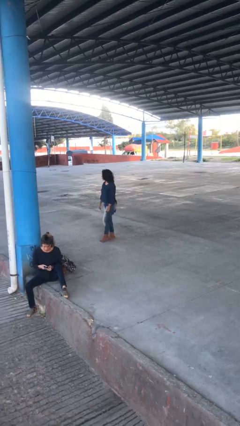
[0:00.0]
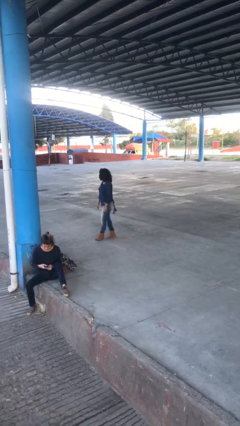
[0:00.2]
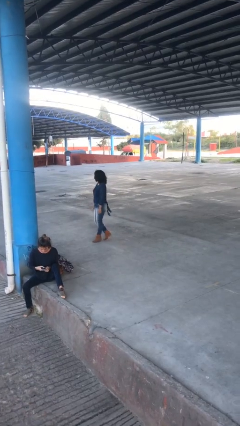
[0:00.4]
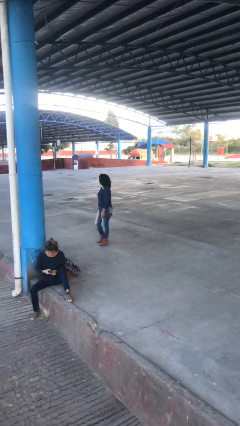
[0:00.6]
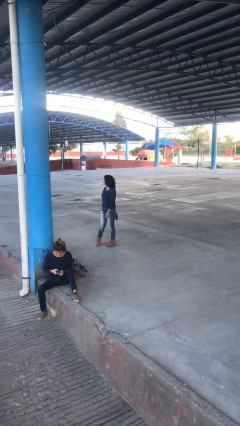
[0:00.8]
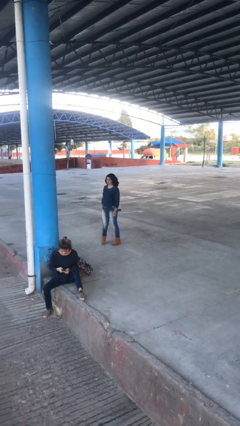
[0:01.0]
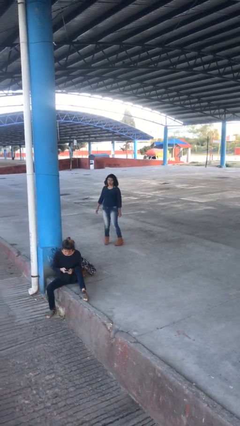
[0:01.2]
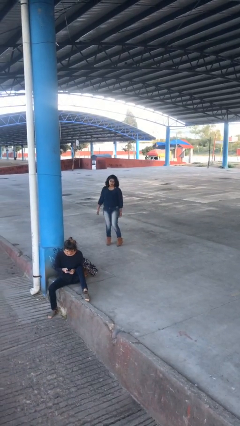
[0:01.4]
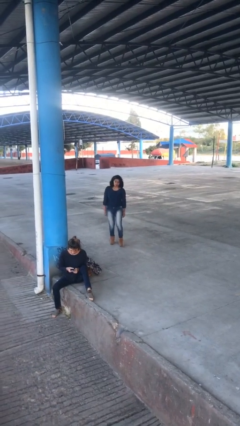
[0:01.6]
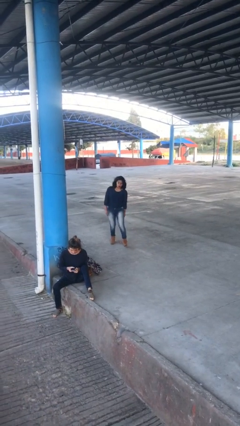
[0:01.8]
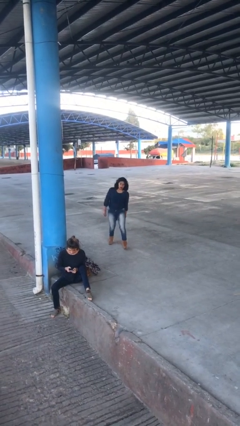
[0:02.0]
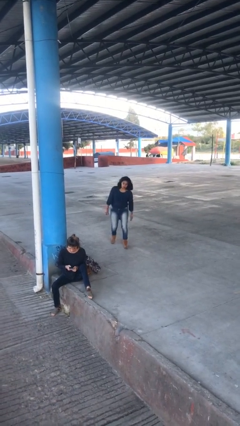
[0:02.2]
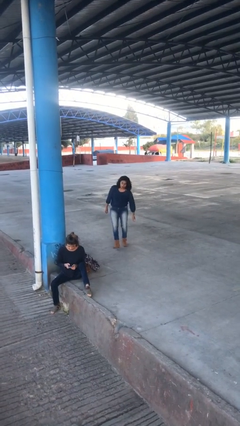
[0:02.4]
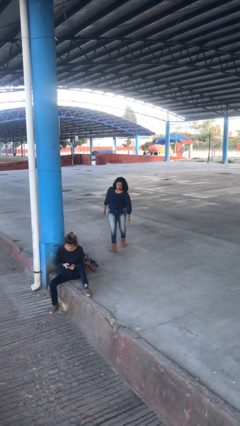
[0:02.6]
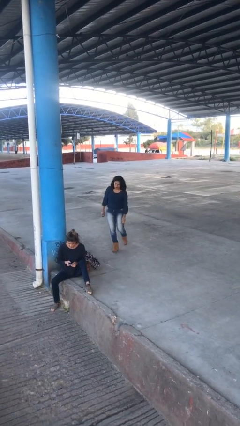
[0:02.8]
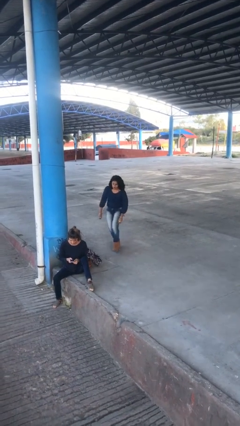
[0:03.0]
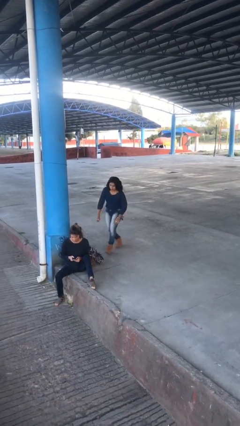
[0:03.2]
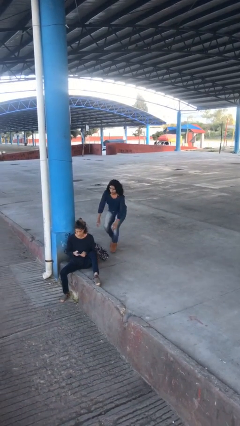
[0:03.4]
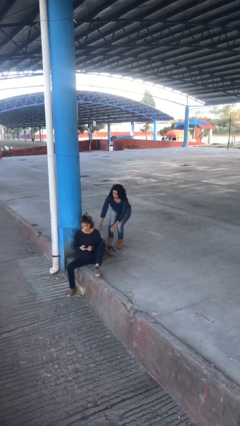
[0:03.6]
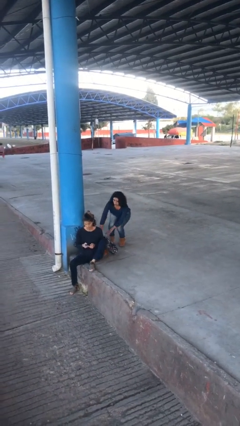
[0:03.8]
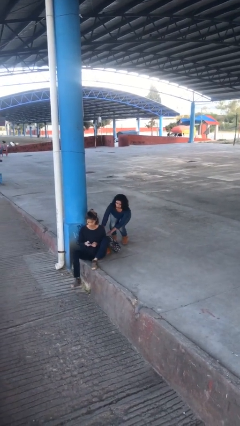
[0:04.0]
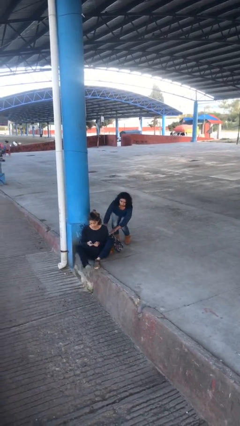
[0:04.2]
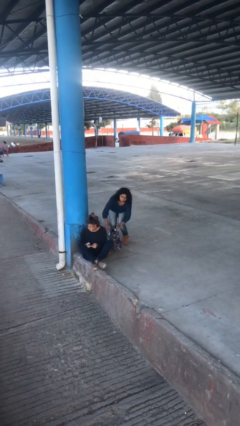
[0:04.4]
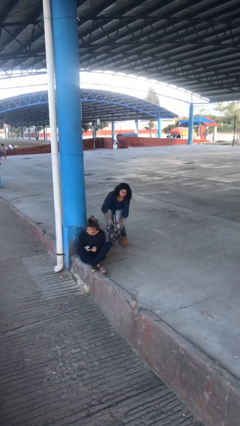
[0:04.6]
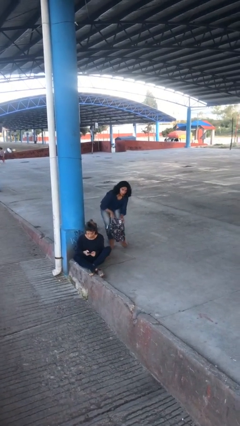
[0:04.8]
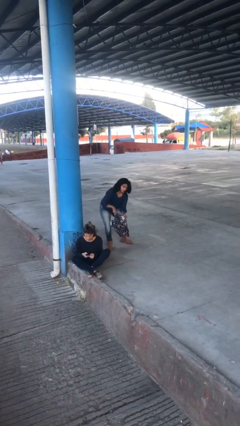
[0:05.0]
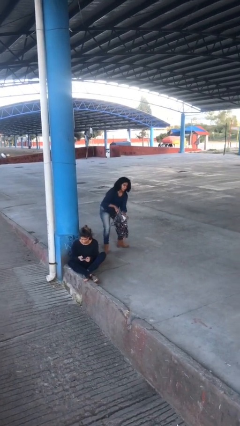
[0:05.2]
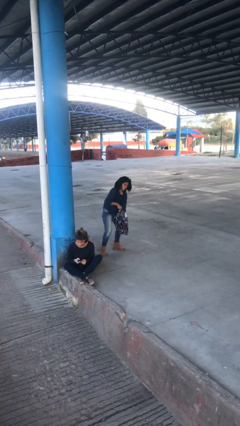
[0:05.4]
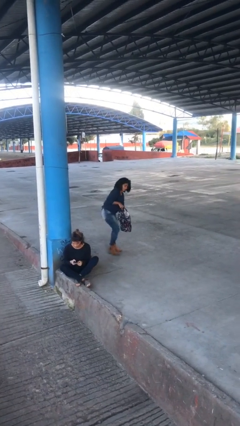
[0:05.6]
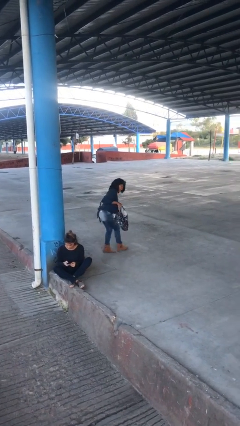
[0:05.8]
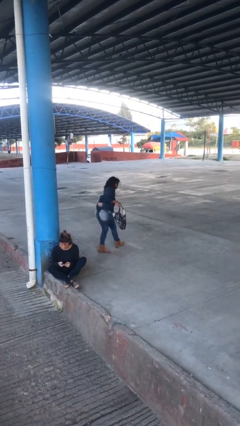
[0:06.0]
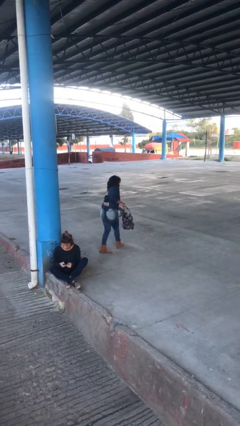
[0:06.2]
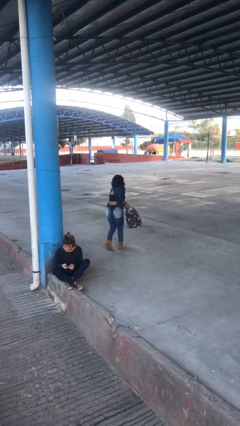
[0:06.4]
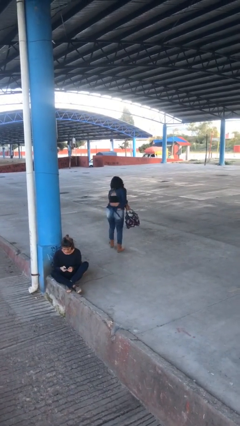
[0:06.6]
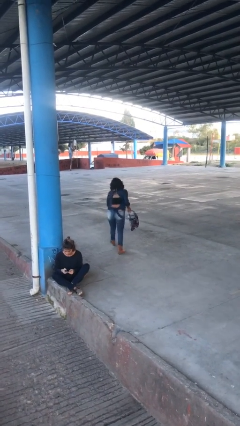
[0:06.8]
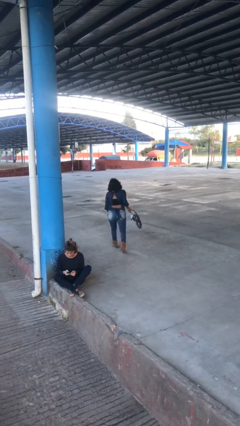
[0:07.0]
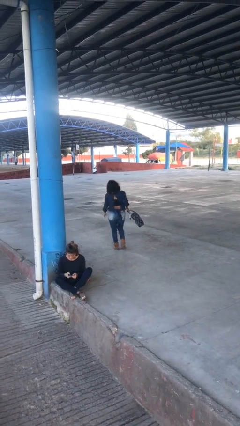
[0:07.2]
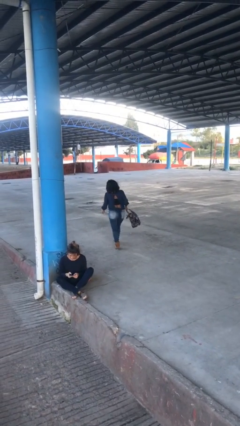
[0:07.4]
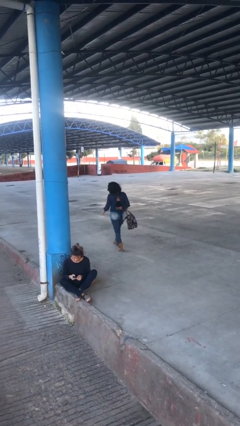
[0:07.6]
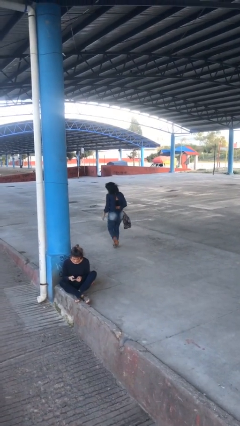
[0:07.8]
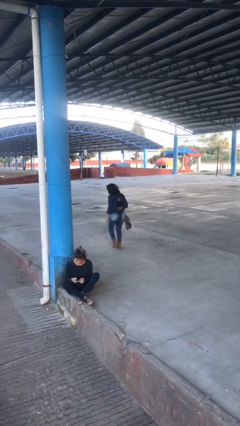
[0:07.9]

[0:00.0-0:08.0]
person steals object from person

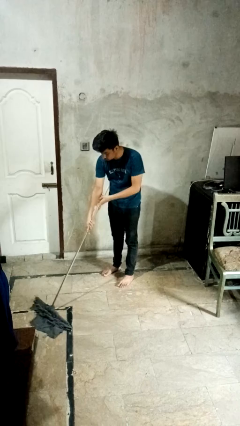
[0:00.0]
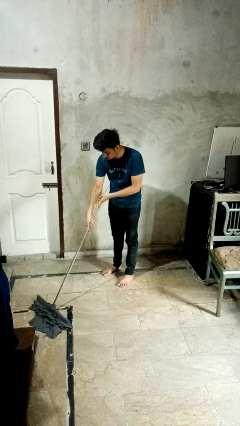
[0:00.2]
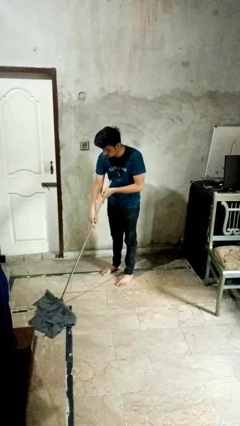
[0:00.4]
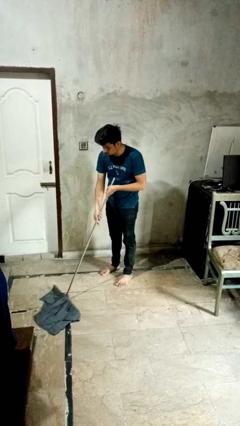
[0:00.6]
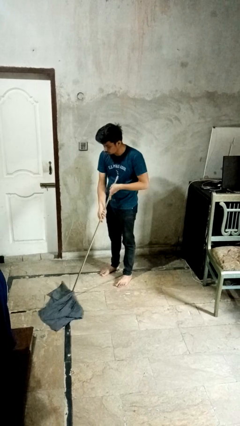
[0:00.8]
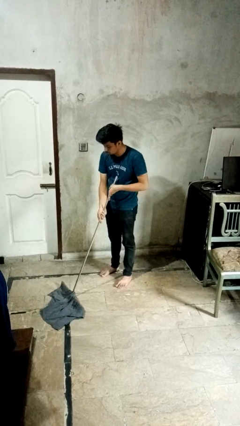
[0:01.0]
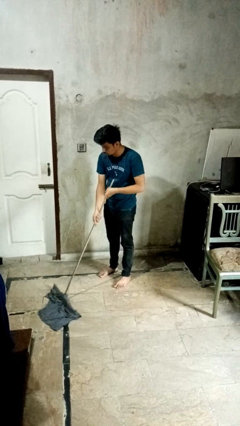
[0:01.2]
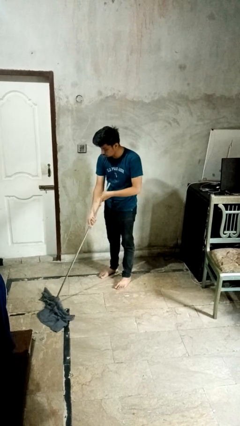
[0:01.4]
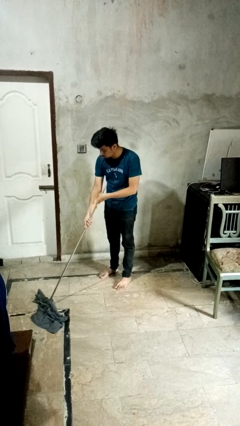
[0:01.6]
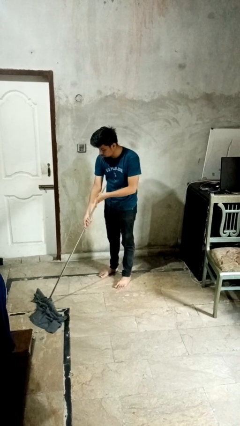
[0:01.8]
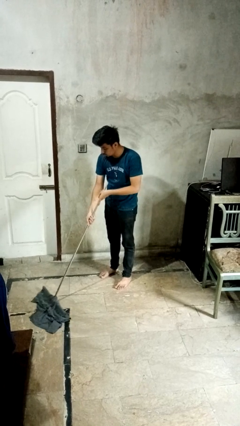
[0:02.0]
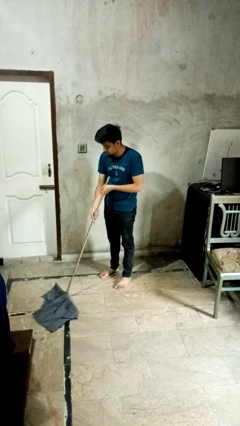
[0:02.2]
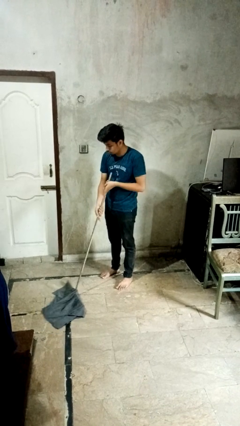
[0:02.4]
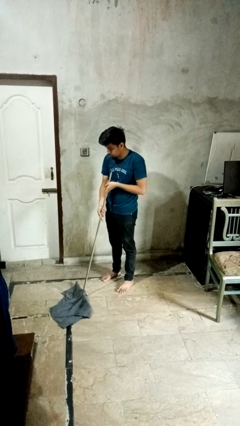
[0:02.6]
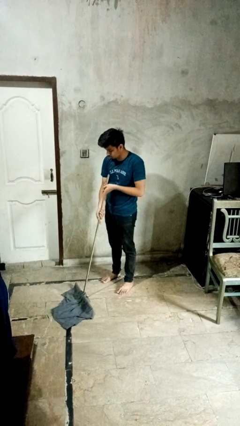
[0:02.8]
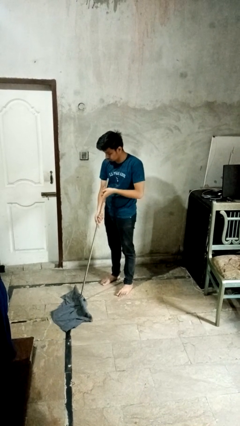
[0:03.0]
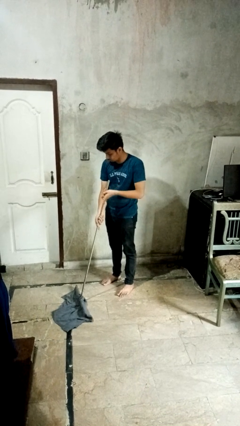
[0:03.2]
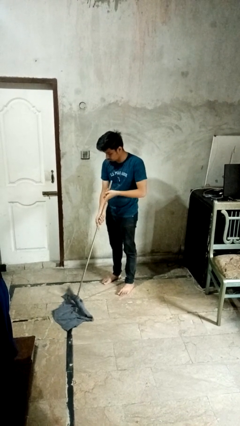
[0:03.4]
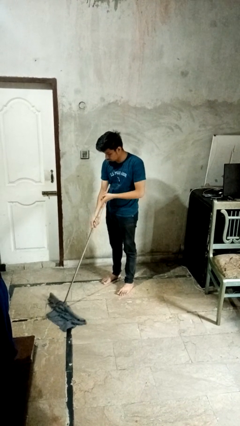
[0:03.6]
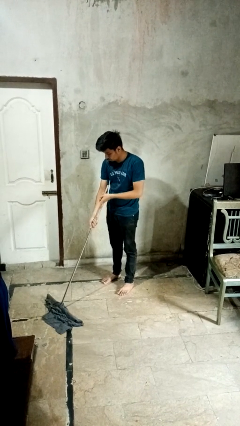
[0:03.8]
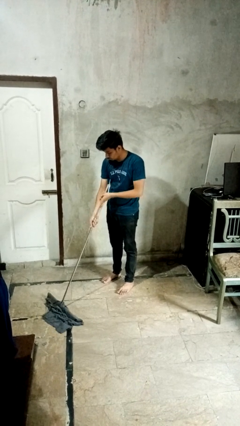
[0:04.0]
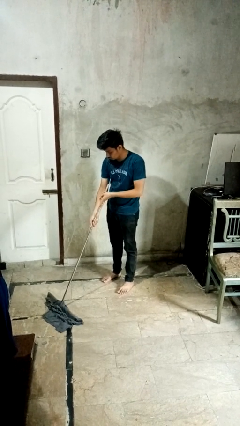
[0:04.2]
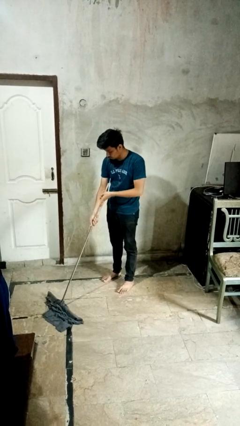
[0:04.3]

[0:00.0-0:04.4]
person mops

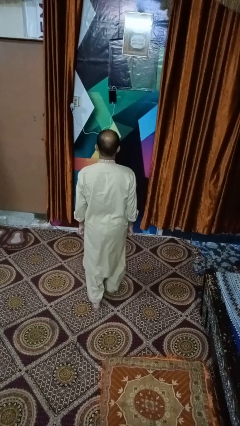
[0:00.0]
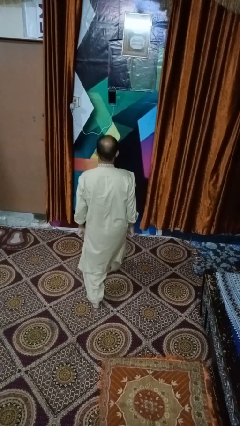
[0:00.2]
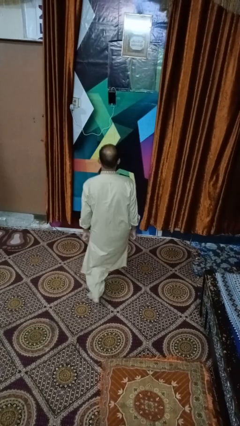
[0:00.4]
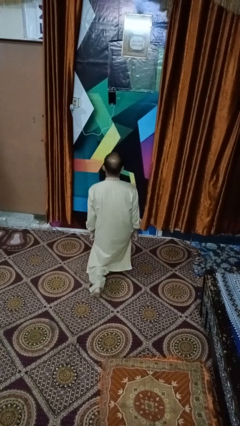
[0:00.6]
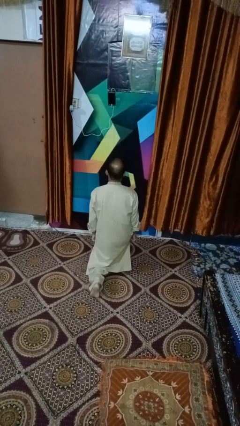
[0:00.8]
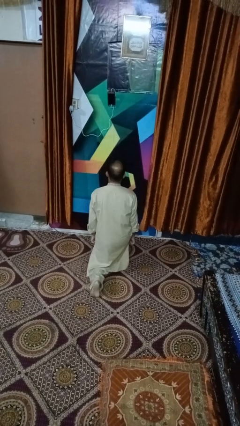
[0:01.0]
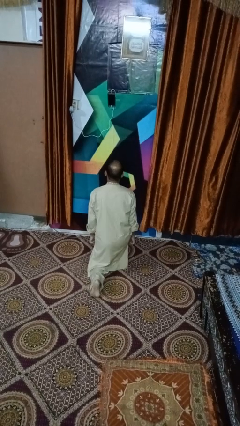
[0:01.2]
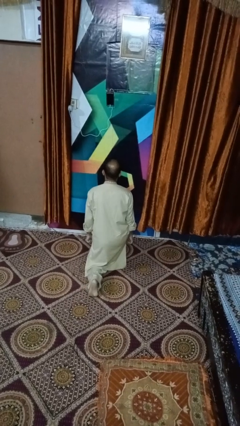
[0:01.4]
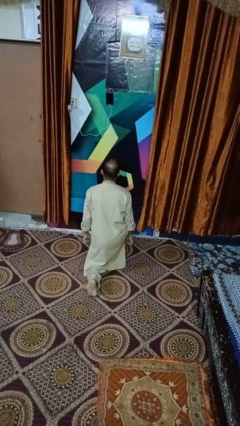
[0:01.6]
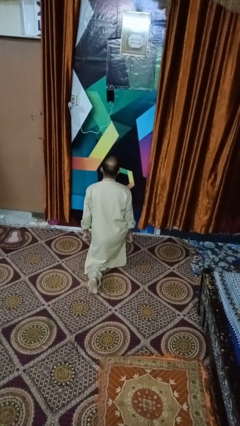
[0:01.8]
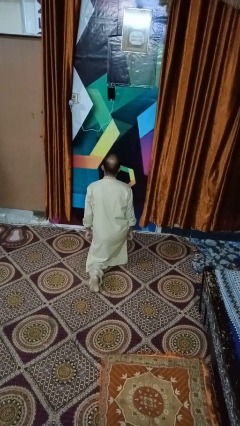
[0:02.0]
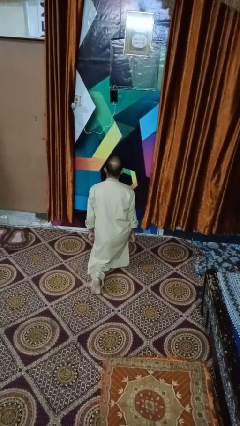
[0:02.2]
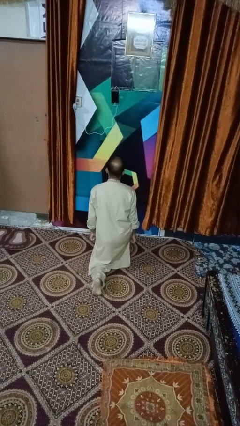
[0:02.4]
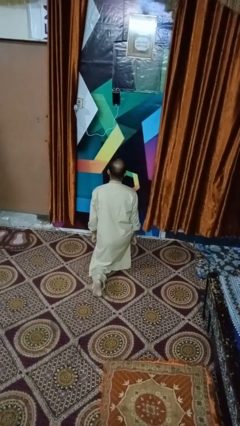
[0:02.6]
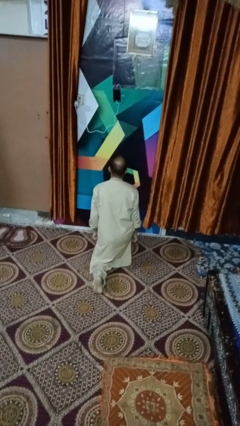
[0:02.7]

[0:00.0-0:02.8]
person exercises with lunges

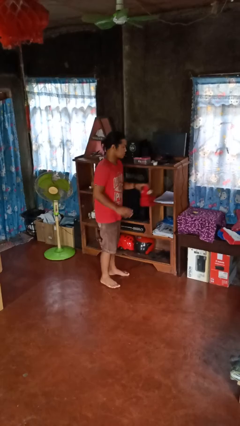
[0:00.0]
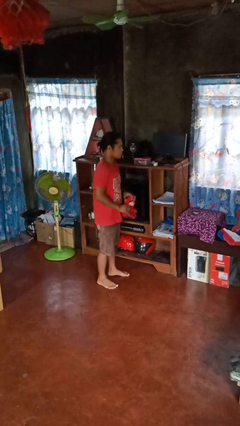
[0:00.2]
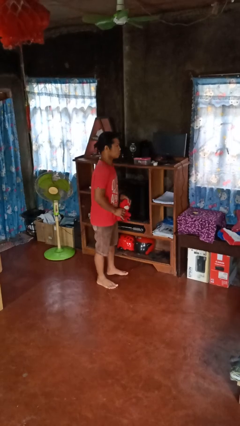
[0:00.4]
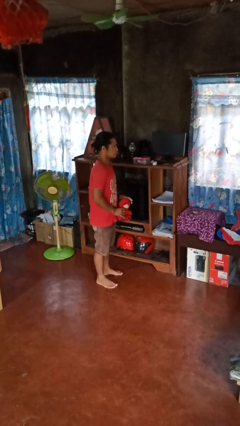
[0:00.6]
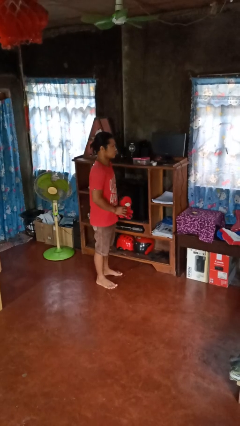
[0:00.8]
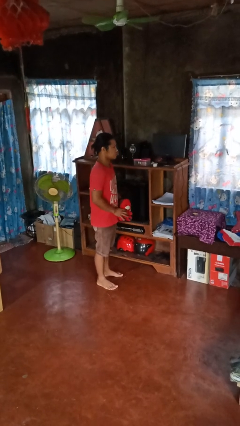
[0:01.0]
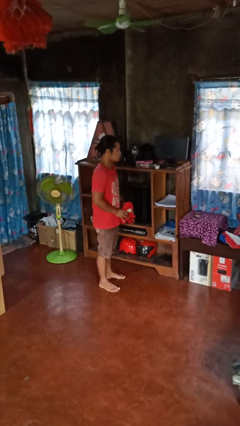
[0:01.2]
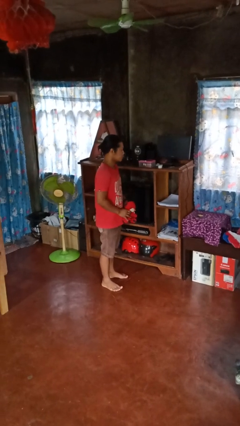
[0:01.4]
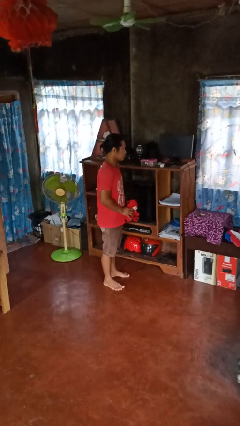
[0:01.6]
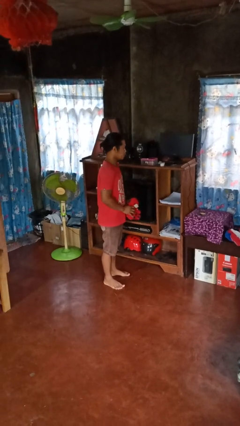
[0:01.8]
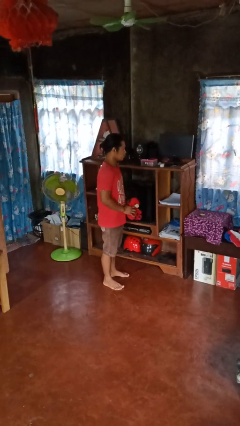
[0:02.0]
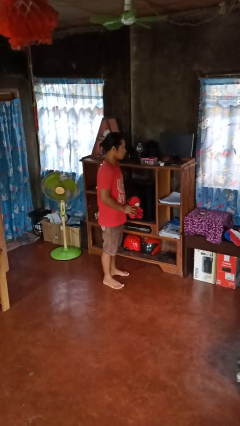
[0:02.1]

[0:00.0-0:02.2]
person picks up object from shelf

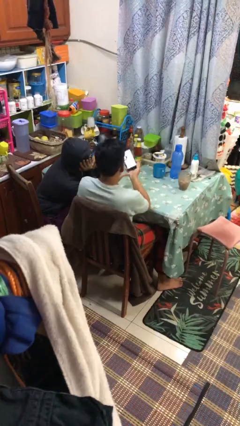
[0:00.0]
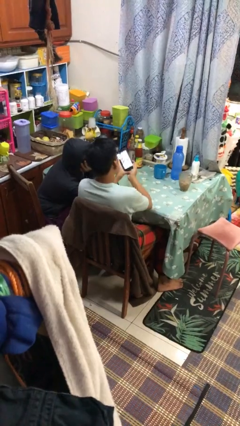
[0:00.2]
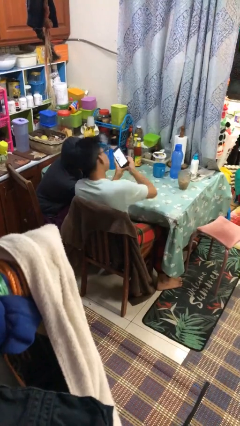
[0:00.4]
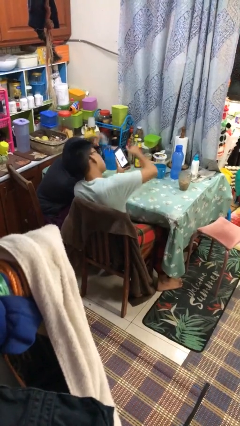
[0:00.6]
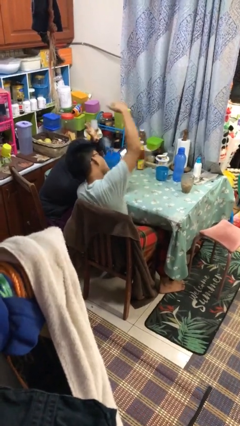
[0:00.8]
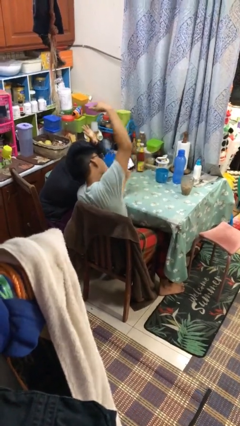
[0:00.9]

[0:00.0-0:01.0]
person takes selfie with person
